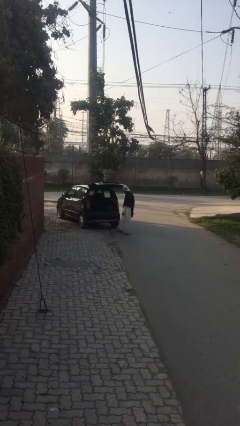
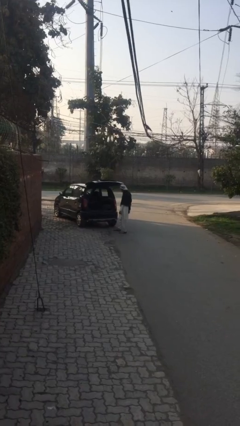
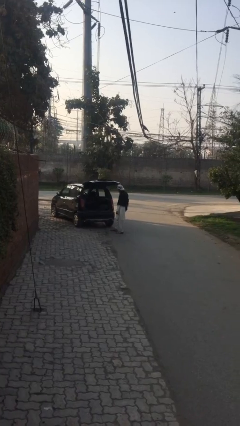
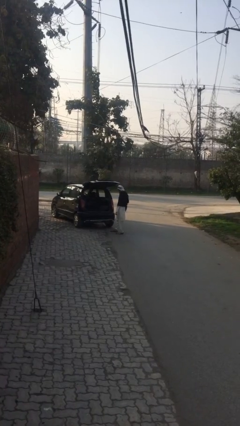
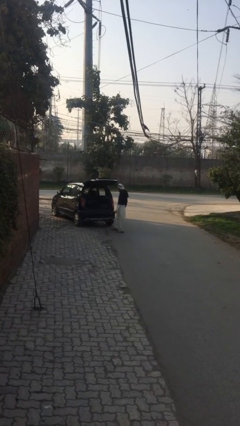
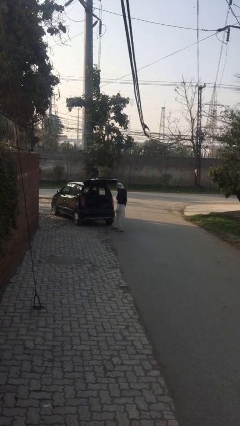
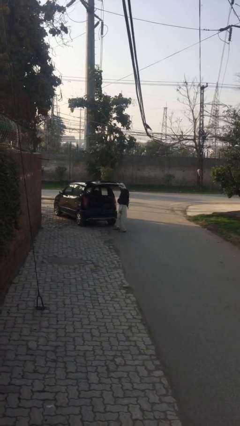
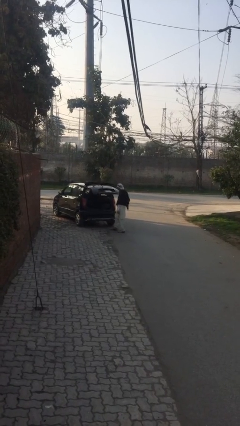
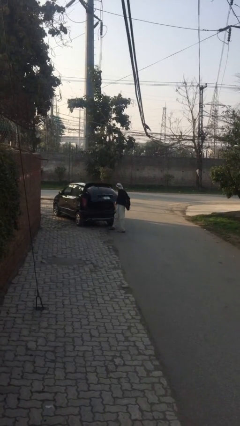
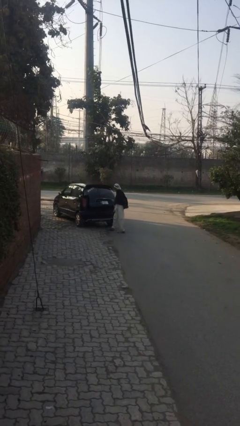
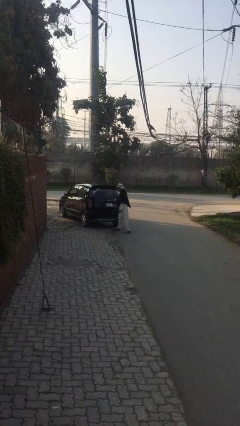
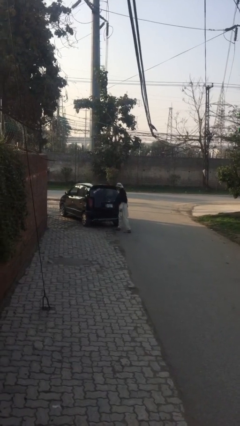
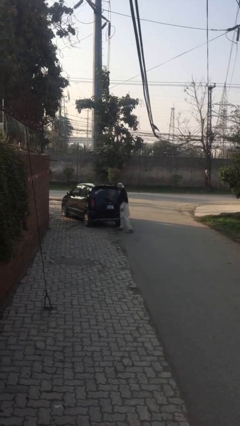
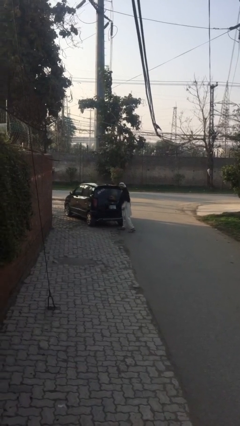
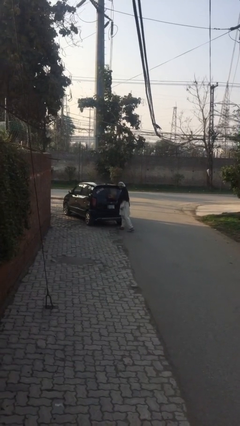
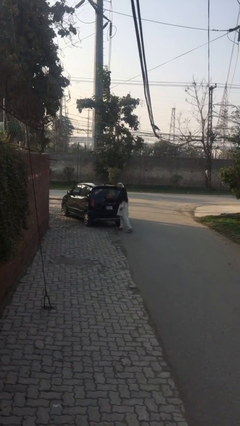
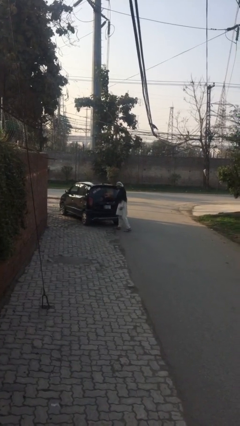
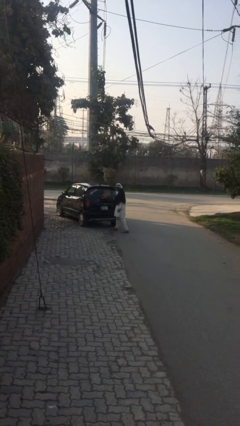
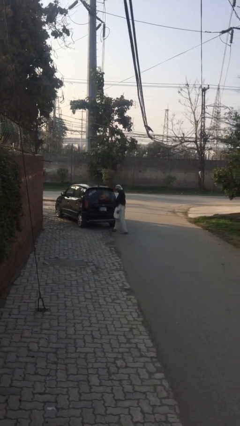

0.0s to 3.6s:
person closes car trunk

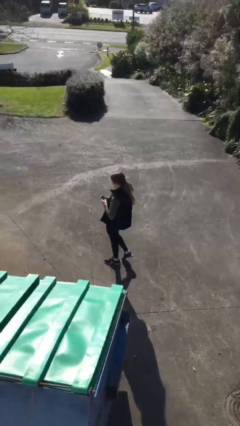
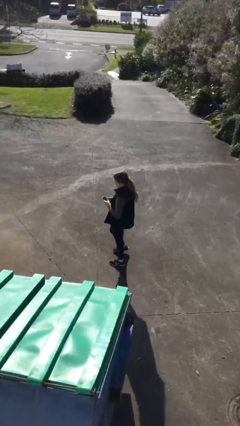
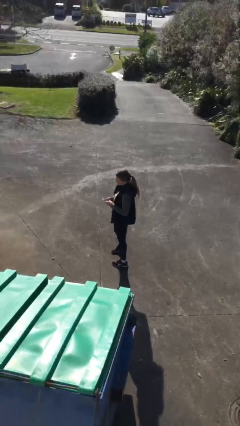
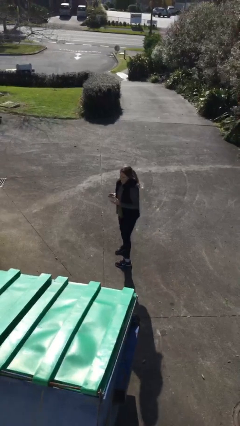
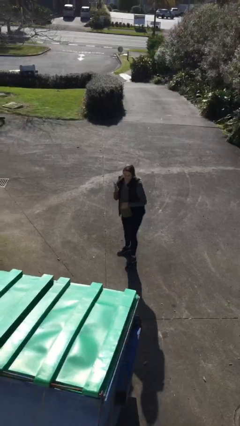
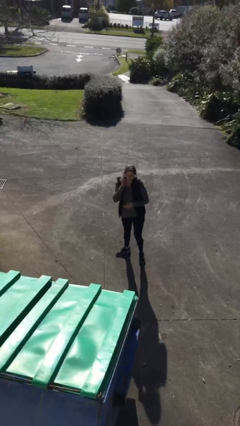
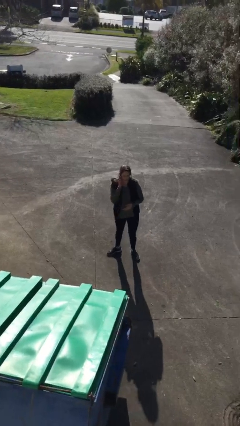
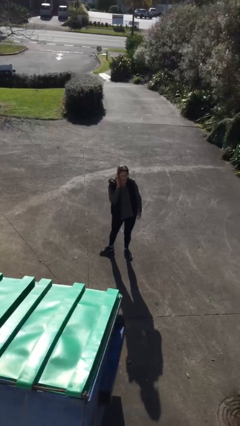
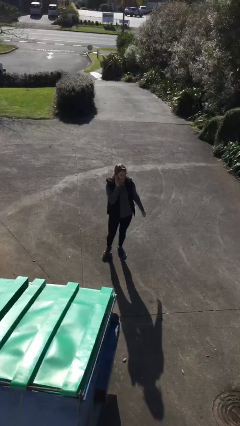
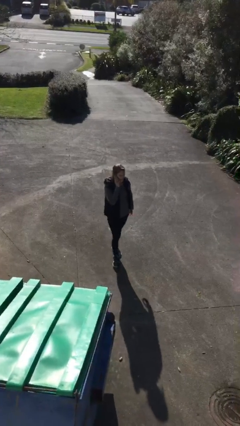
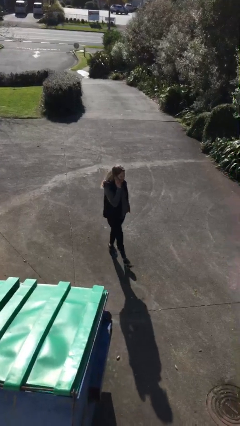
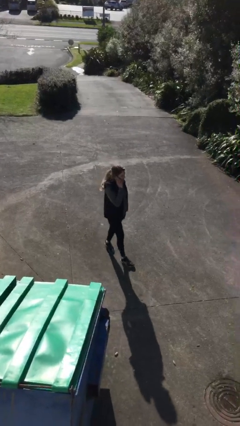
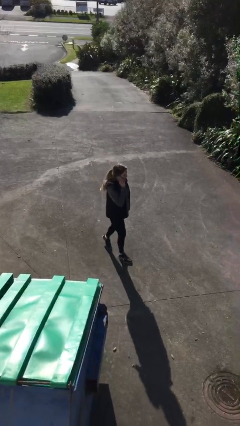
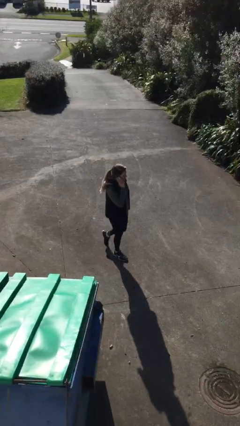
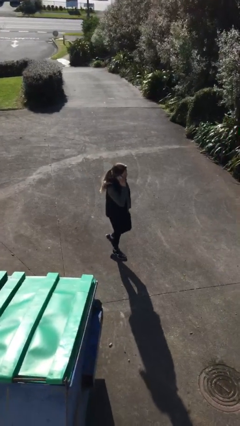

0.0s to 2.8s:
person talks on phone

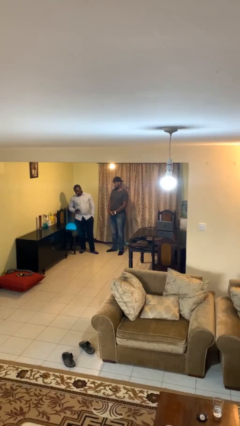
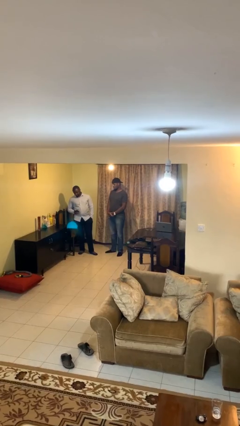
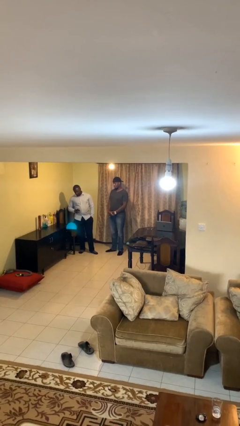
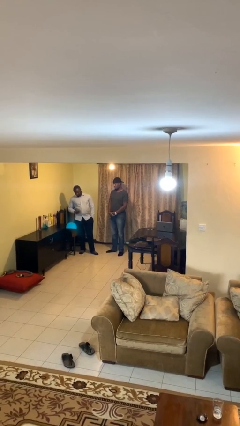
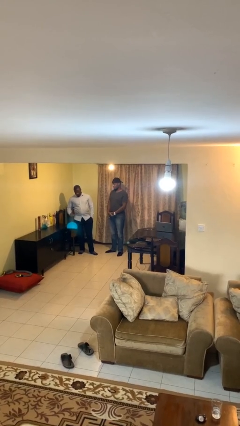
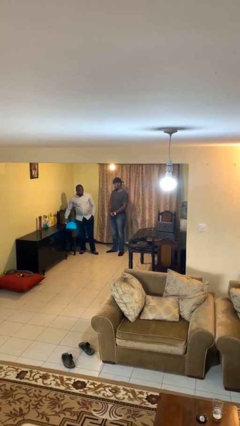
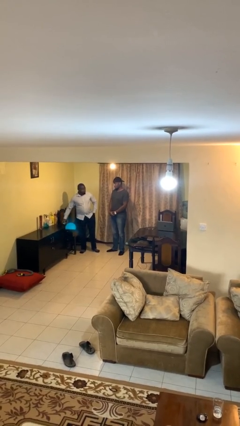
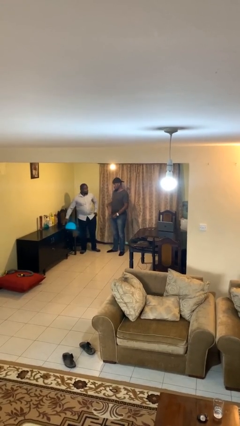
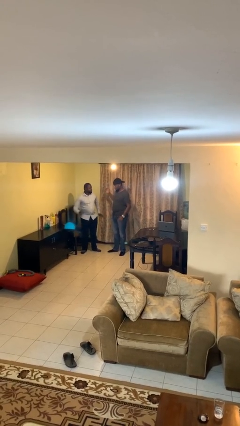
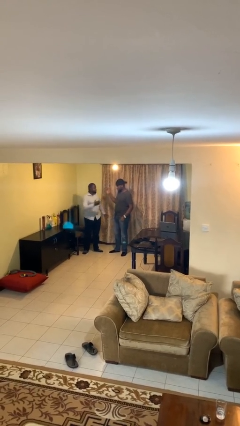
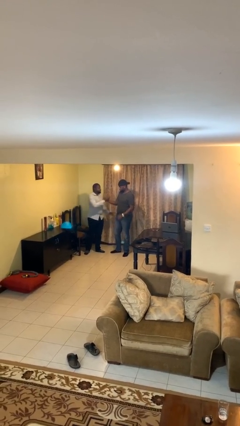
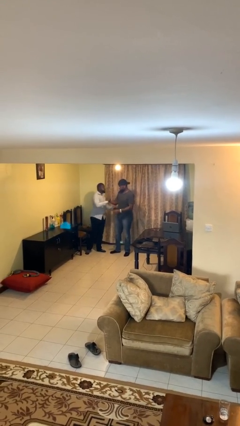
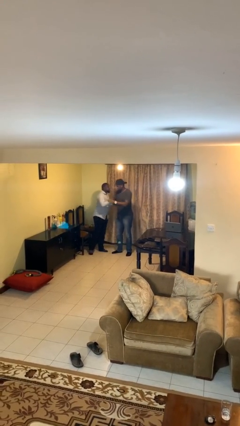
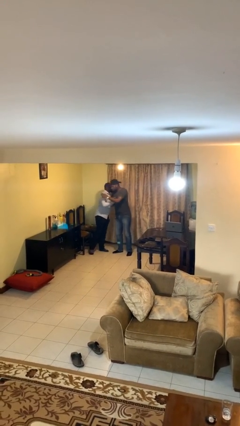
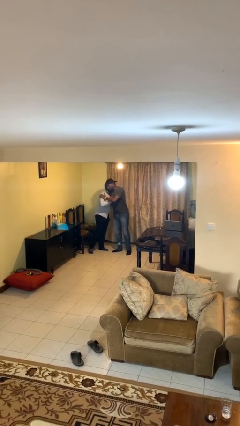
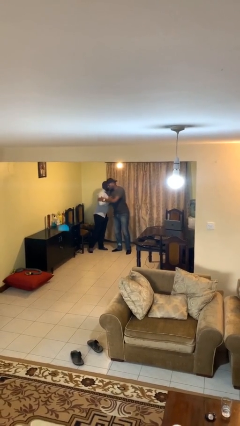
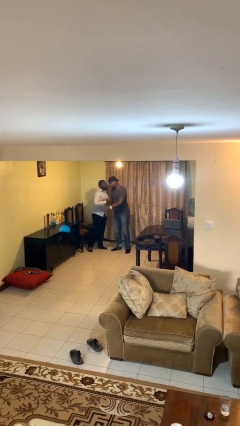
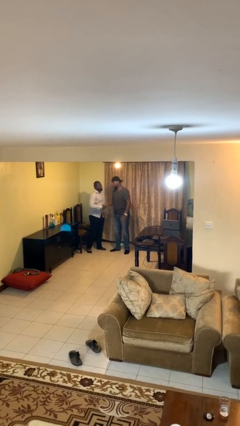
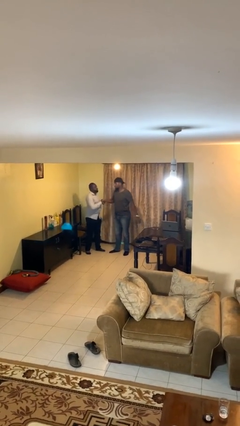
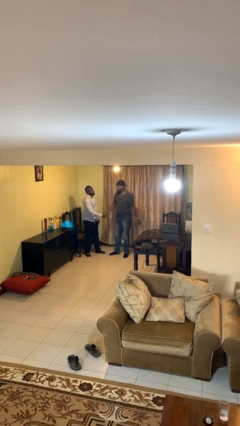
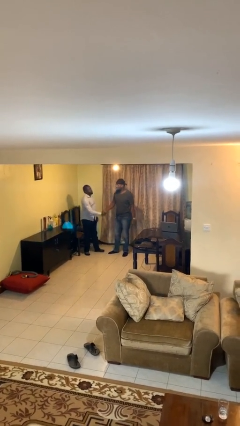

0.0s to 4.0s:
person embraces person

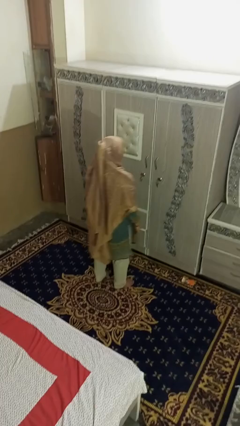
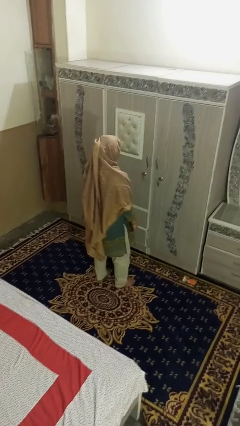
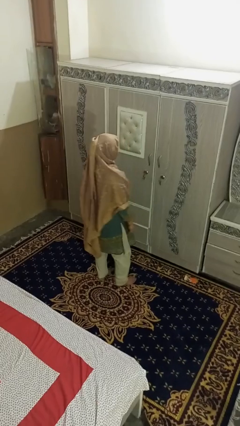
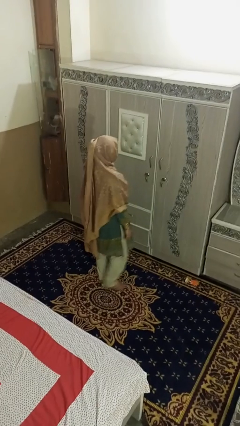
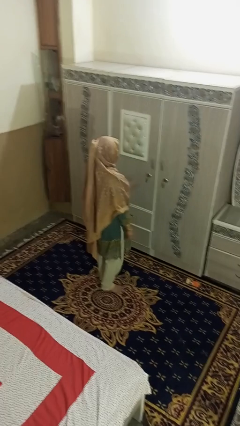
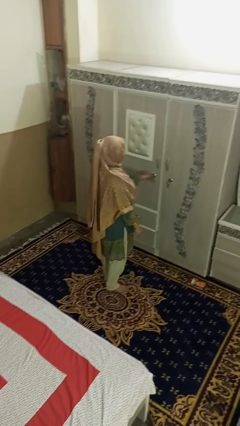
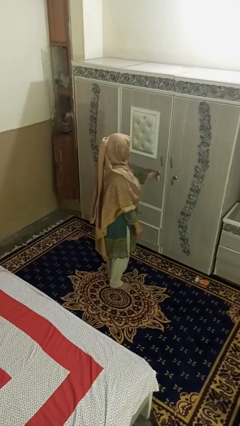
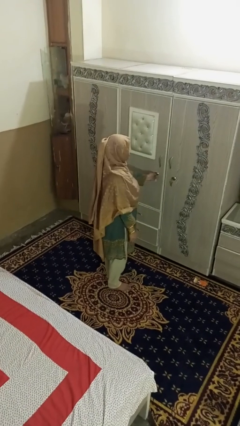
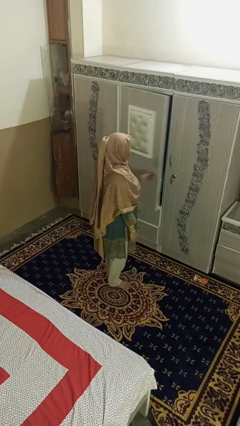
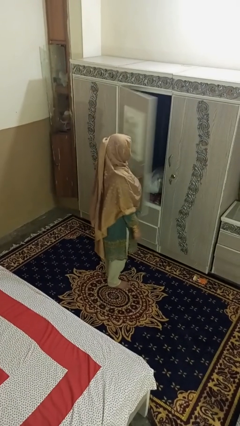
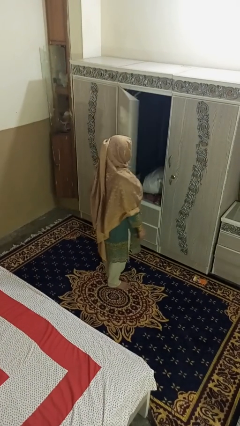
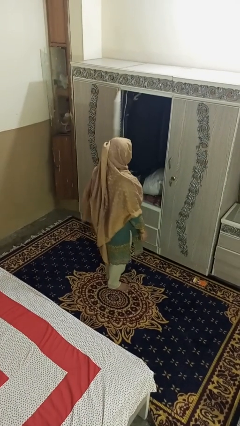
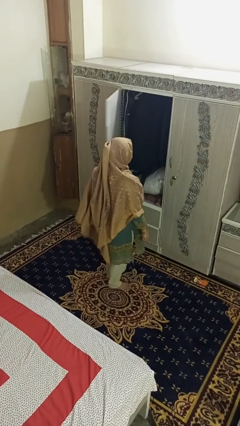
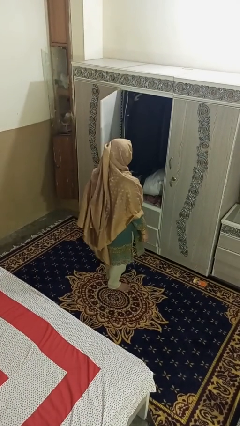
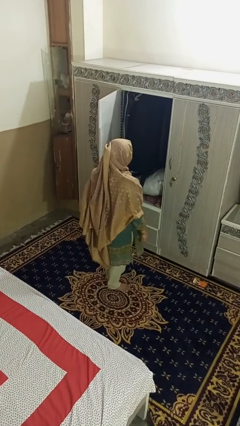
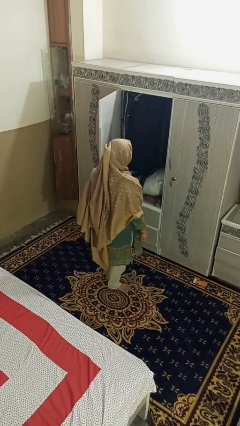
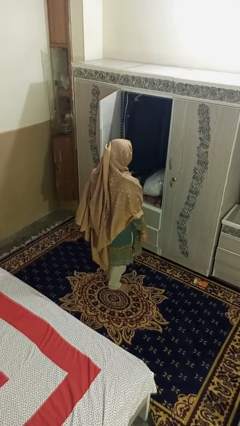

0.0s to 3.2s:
person opens dresser drawer

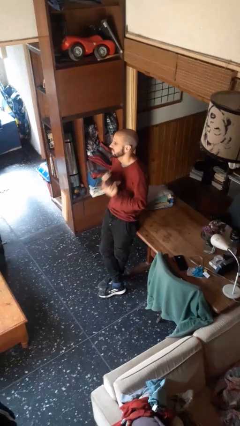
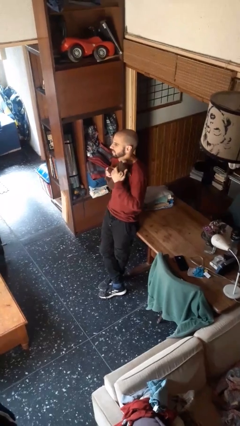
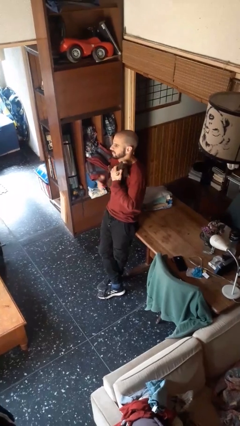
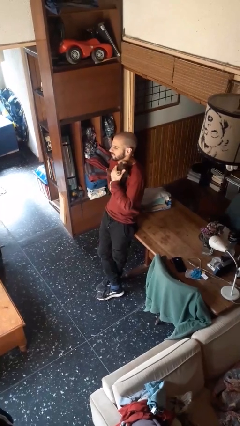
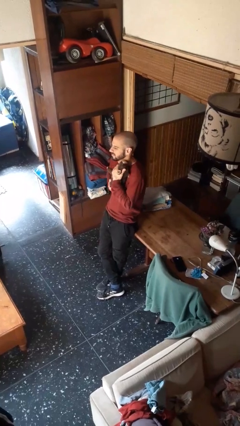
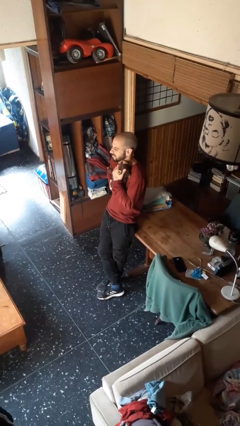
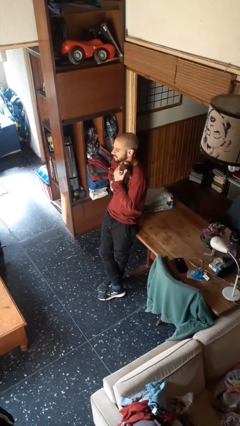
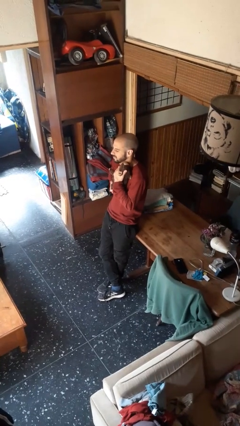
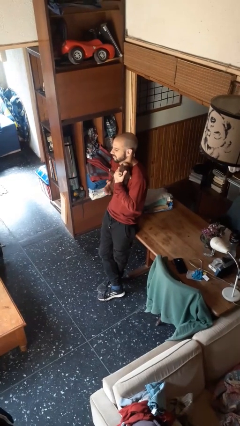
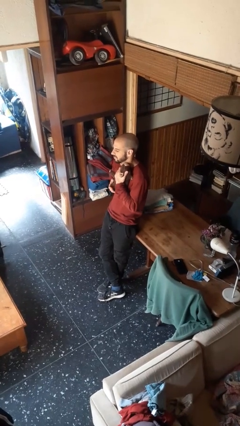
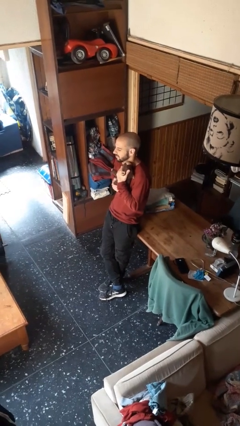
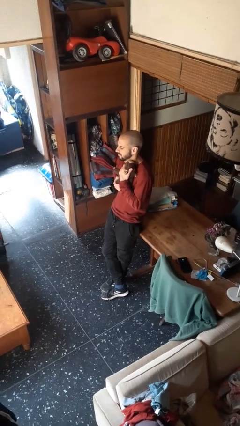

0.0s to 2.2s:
person hugs stuffed animal

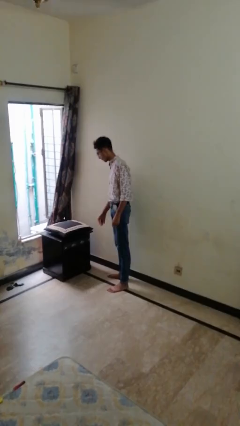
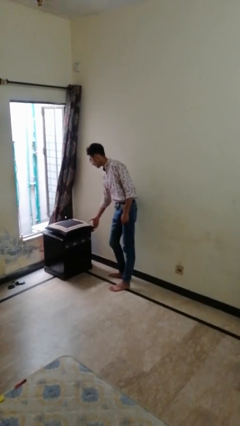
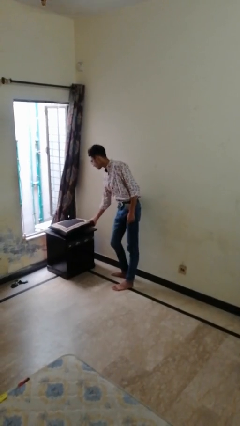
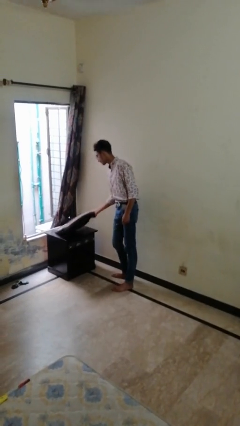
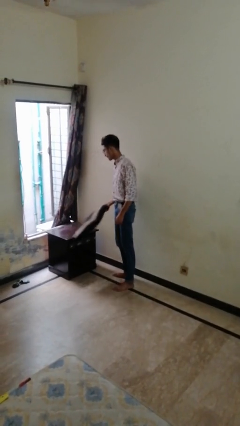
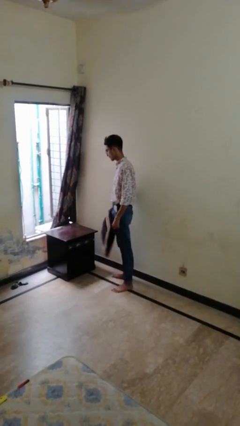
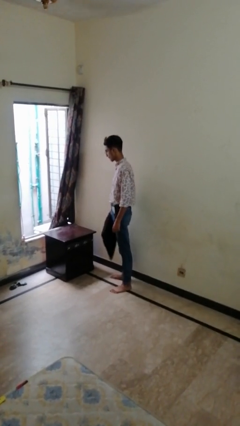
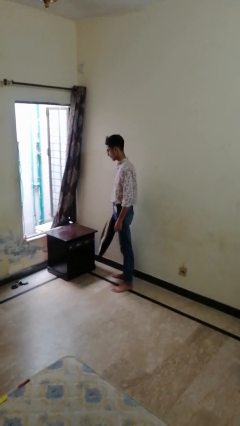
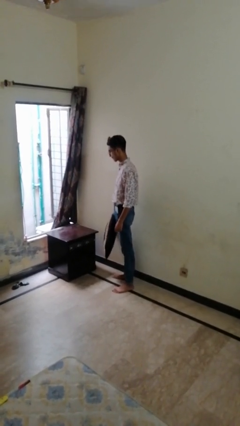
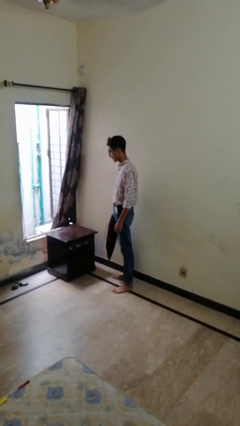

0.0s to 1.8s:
person picks up object from table
